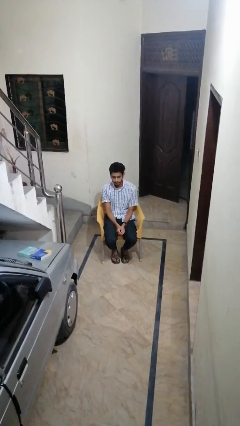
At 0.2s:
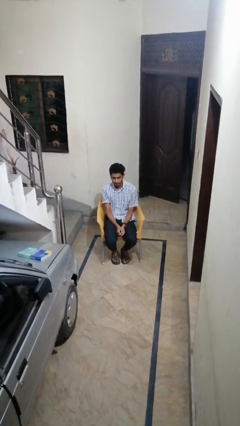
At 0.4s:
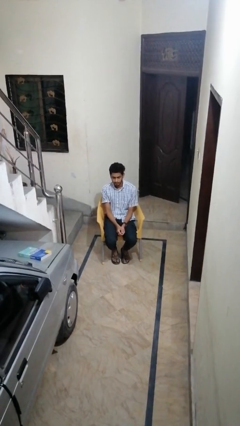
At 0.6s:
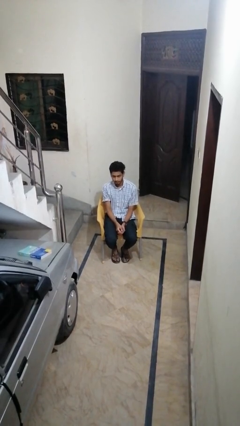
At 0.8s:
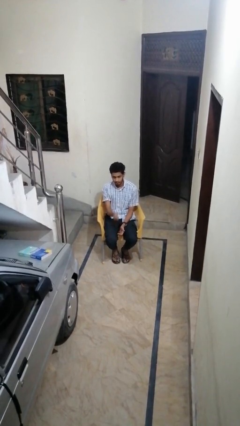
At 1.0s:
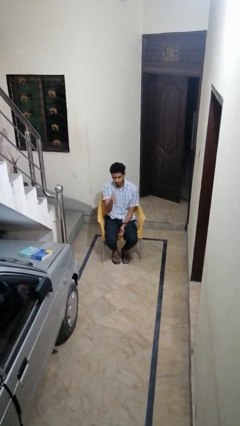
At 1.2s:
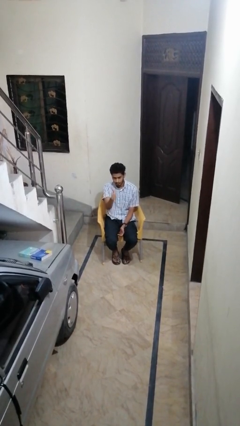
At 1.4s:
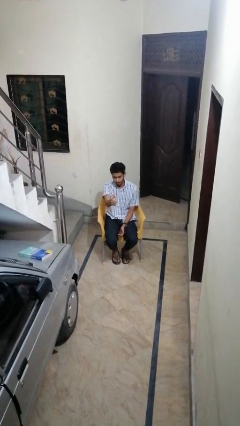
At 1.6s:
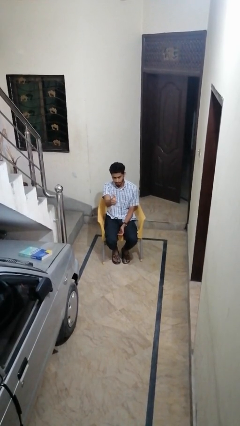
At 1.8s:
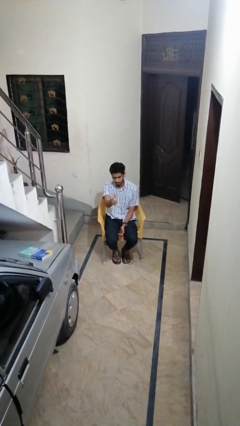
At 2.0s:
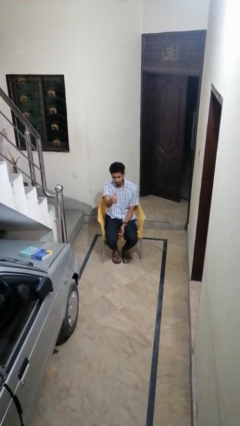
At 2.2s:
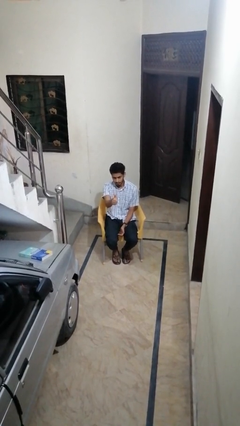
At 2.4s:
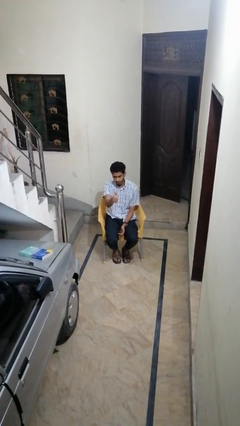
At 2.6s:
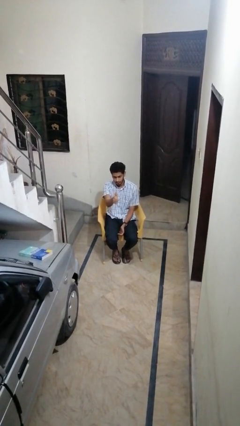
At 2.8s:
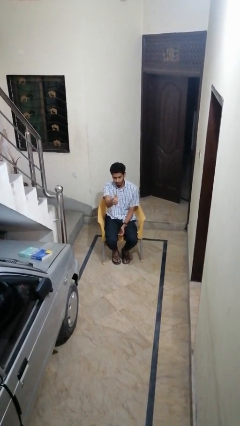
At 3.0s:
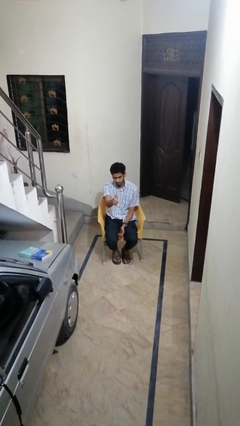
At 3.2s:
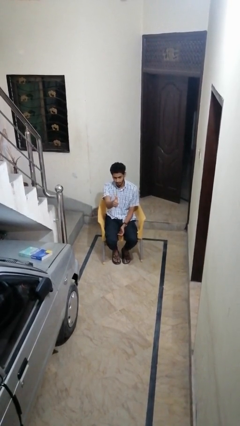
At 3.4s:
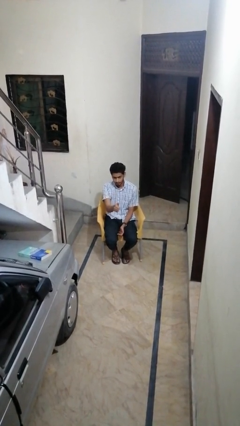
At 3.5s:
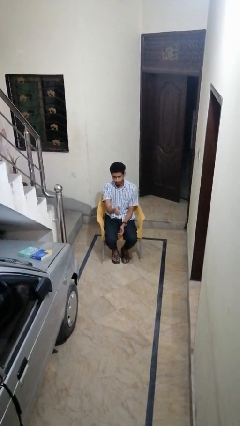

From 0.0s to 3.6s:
person gestures thumbs up

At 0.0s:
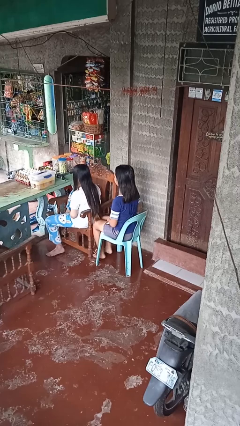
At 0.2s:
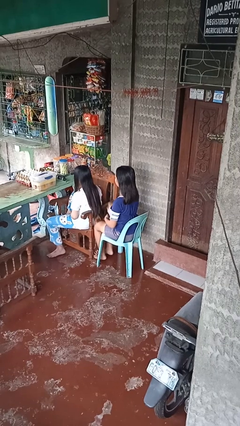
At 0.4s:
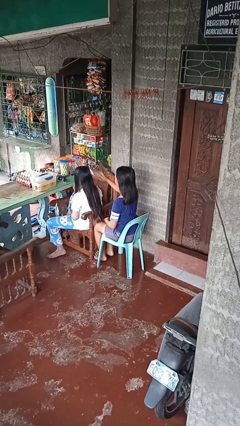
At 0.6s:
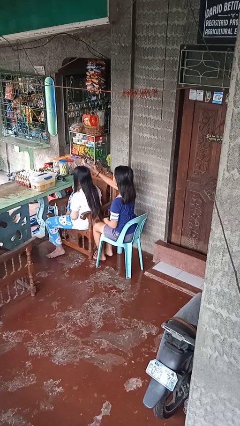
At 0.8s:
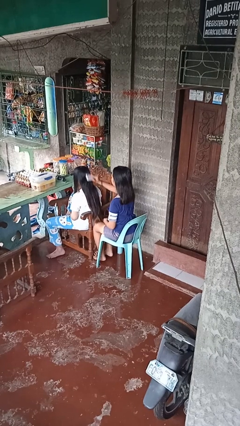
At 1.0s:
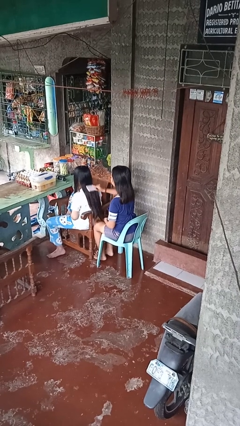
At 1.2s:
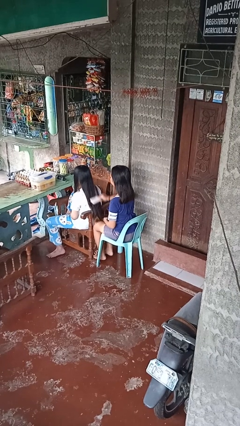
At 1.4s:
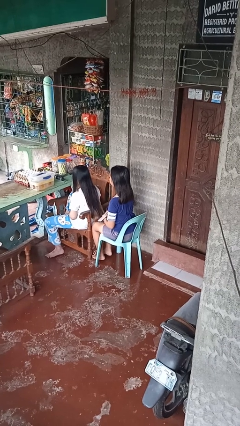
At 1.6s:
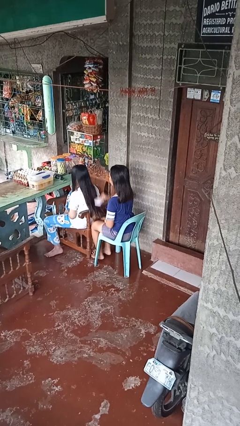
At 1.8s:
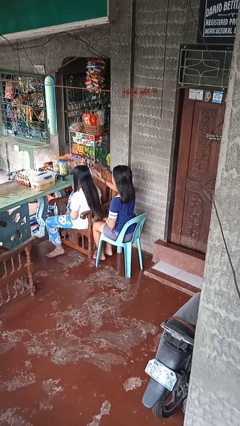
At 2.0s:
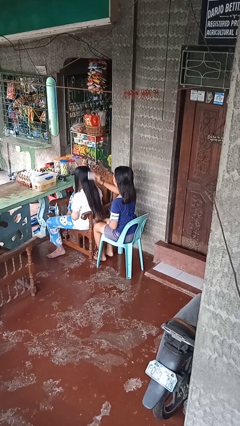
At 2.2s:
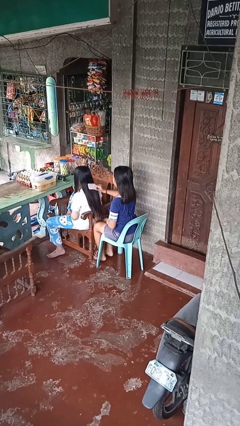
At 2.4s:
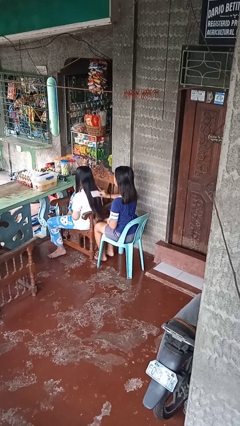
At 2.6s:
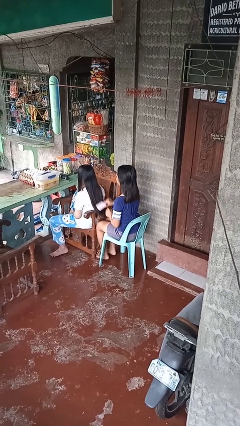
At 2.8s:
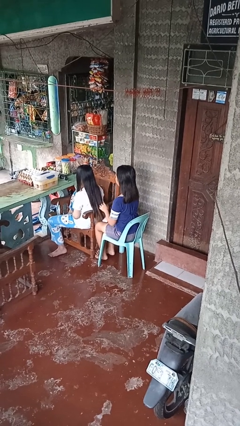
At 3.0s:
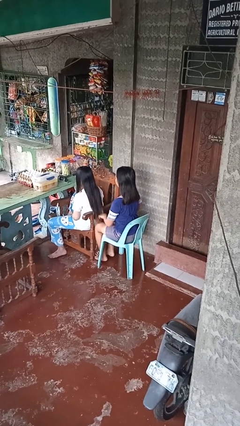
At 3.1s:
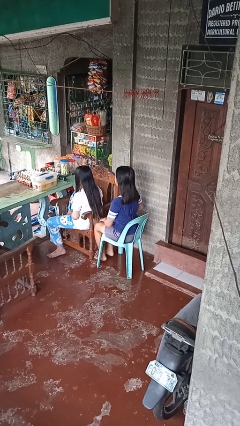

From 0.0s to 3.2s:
person brushes hair of person

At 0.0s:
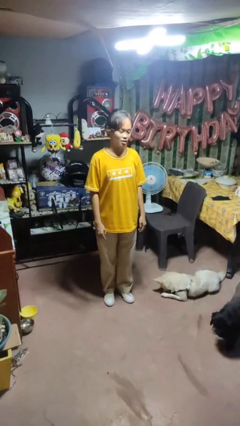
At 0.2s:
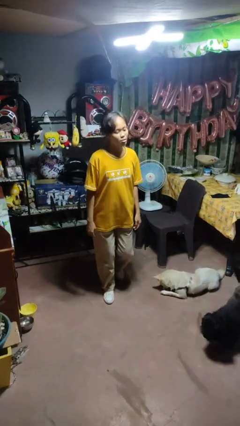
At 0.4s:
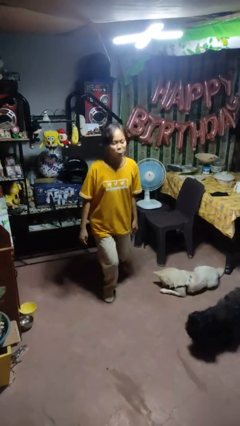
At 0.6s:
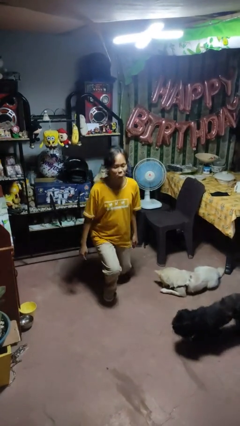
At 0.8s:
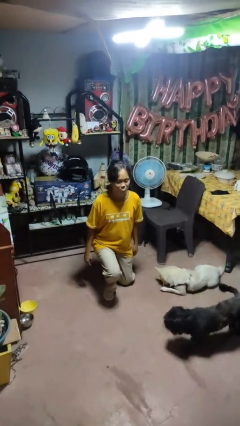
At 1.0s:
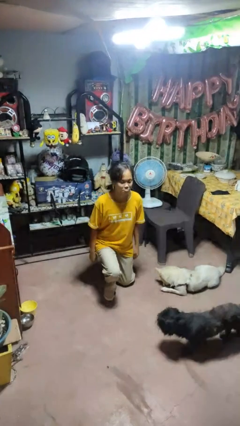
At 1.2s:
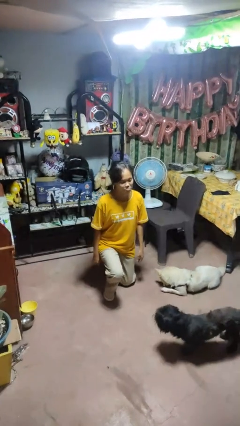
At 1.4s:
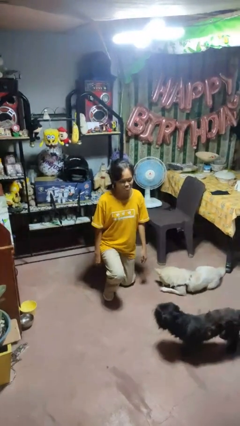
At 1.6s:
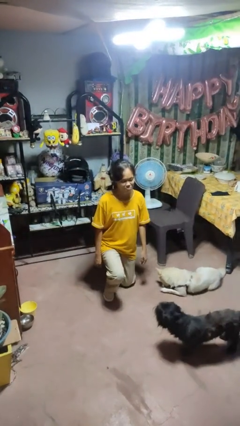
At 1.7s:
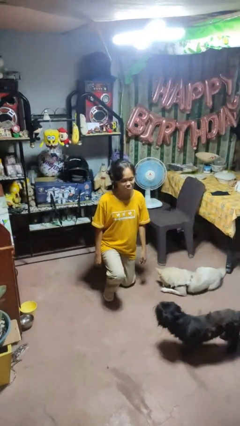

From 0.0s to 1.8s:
person kneels

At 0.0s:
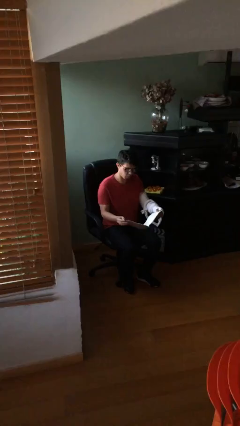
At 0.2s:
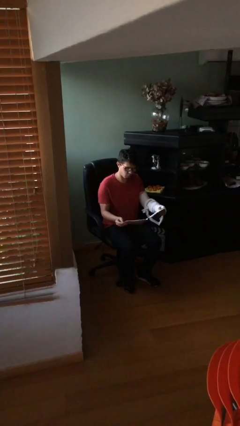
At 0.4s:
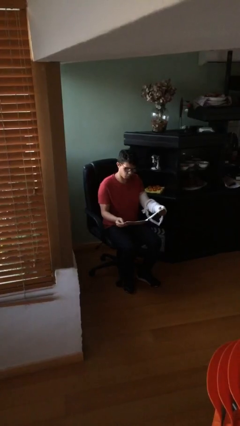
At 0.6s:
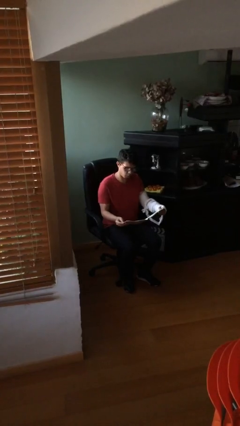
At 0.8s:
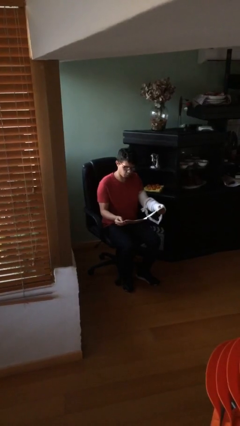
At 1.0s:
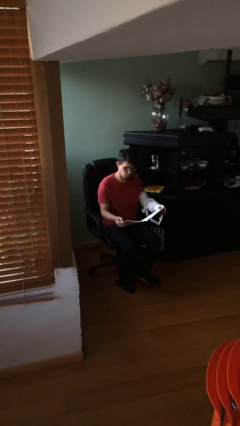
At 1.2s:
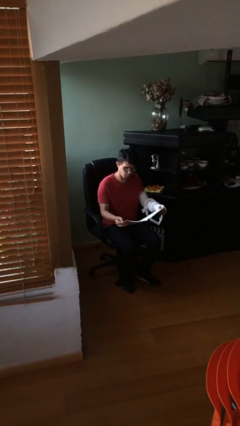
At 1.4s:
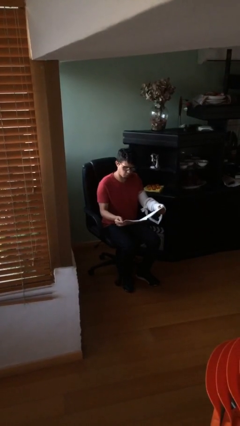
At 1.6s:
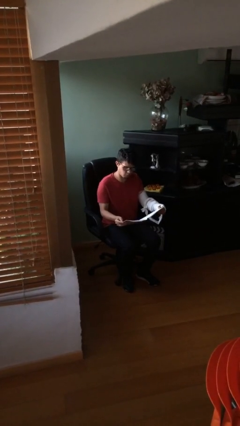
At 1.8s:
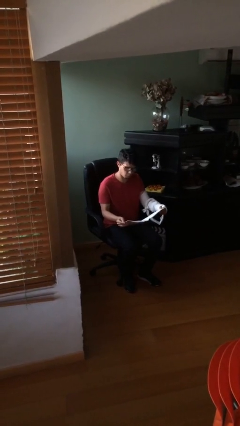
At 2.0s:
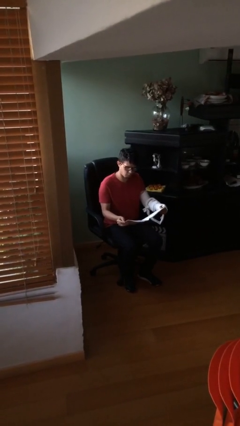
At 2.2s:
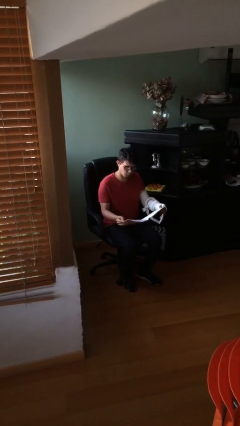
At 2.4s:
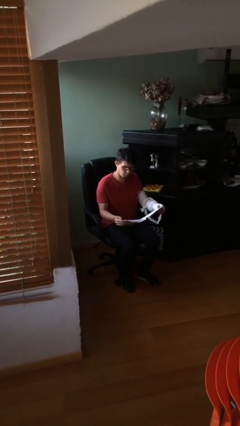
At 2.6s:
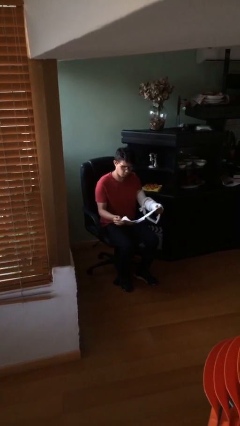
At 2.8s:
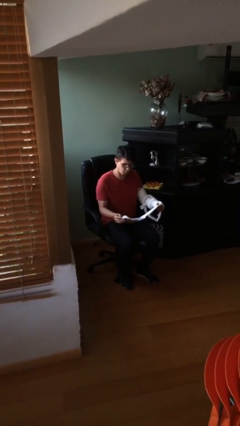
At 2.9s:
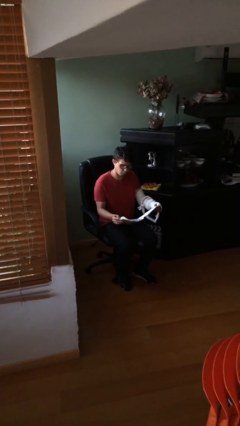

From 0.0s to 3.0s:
person reads document

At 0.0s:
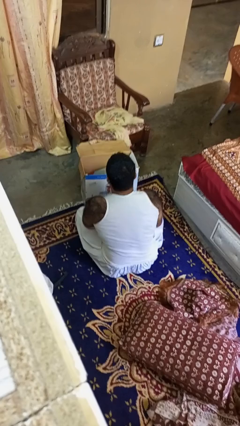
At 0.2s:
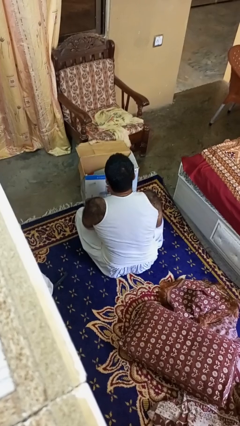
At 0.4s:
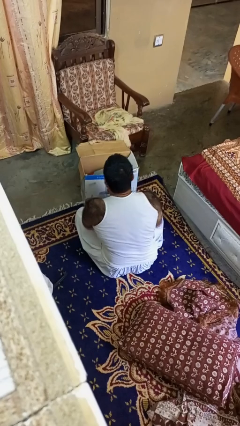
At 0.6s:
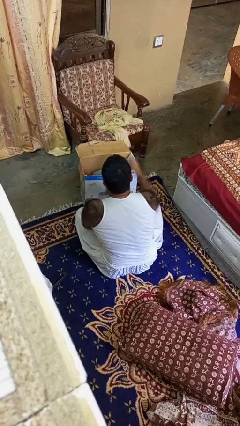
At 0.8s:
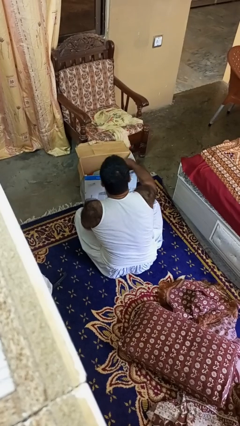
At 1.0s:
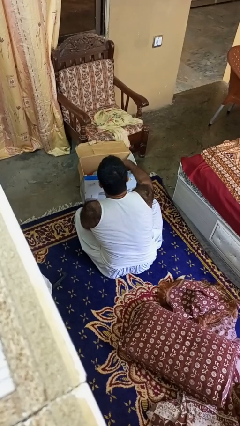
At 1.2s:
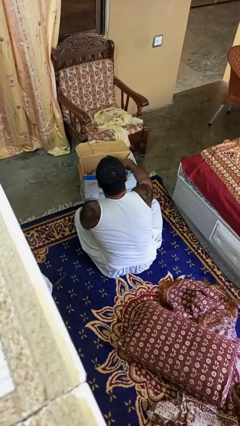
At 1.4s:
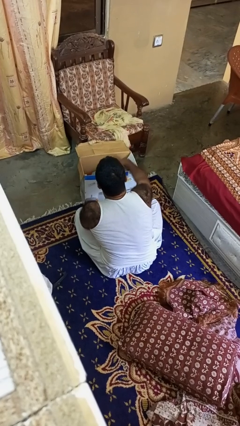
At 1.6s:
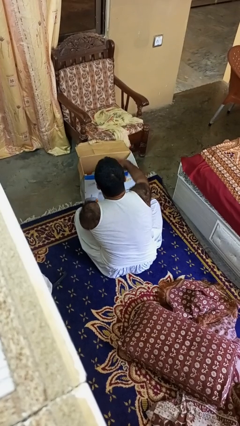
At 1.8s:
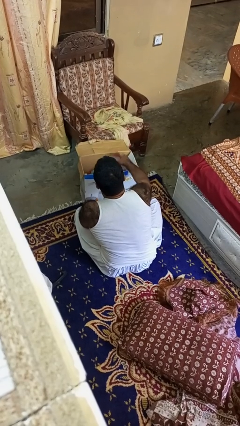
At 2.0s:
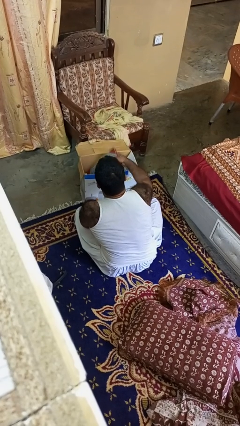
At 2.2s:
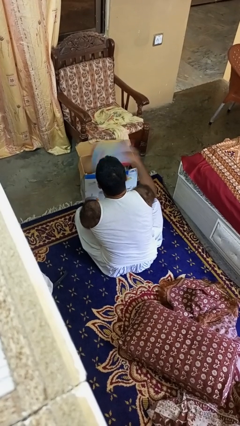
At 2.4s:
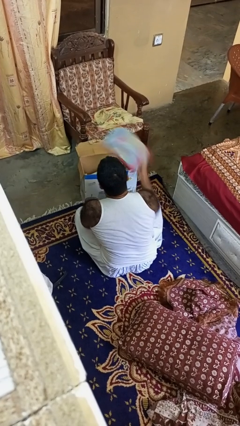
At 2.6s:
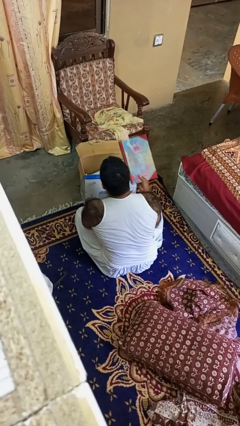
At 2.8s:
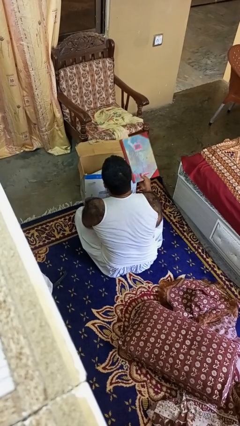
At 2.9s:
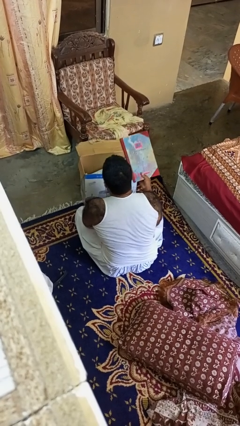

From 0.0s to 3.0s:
person takes object from box

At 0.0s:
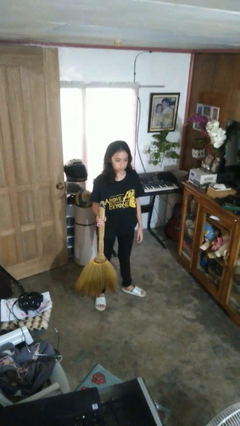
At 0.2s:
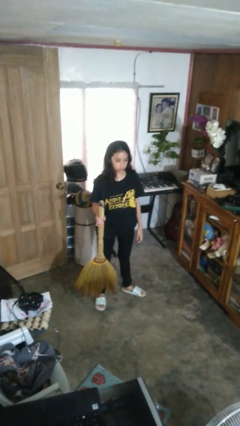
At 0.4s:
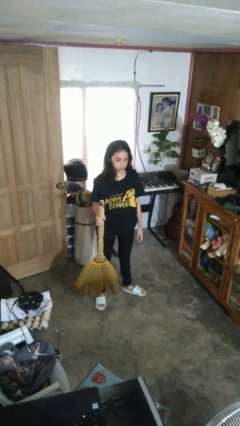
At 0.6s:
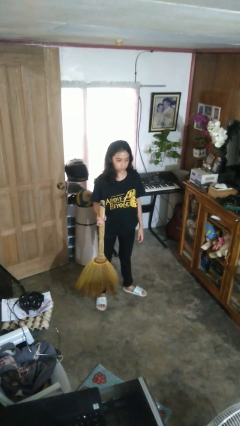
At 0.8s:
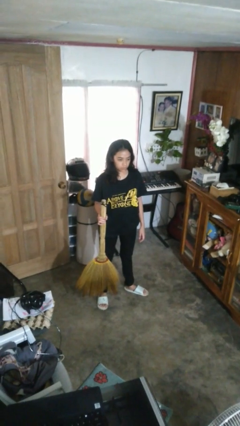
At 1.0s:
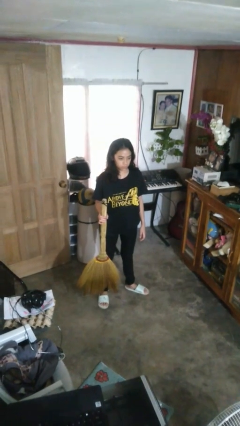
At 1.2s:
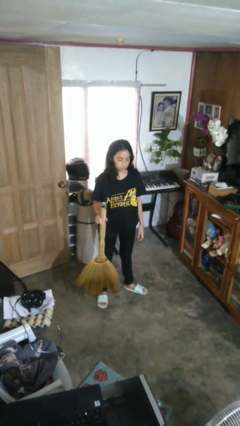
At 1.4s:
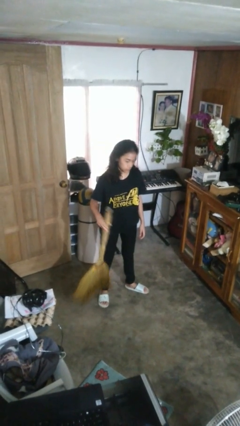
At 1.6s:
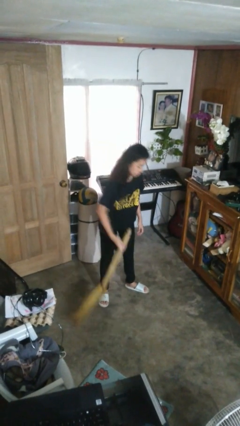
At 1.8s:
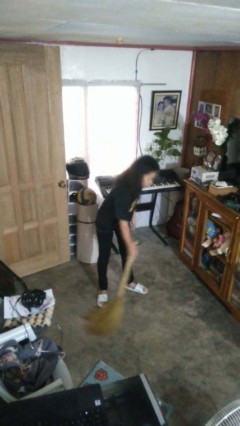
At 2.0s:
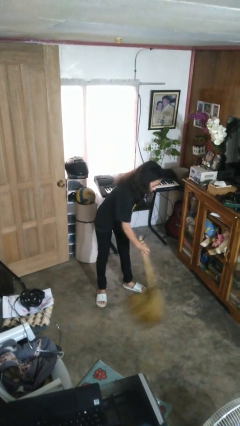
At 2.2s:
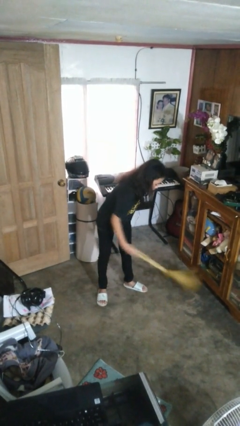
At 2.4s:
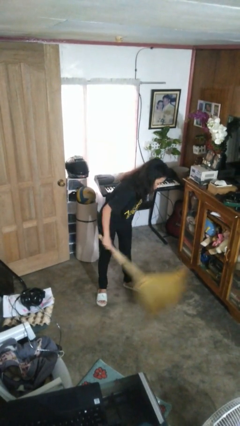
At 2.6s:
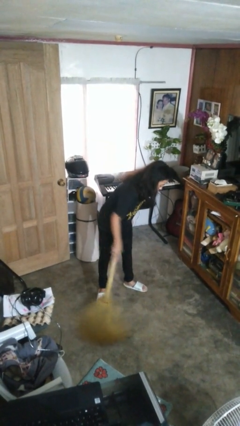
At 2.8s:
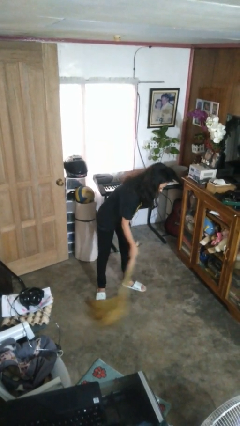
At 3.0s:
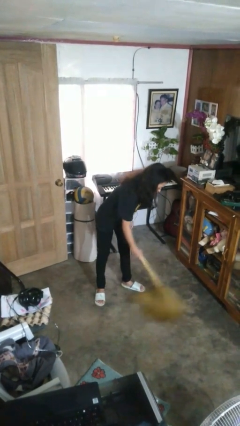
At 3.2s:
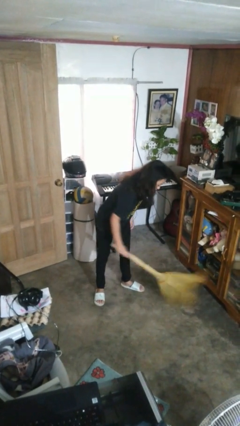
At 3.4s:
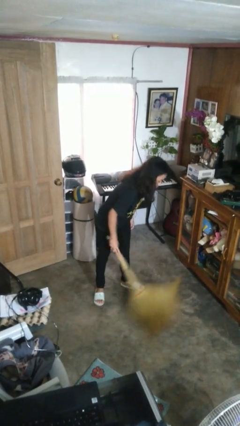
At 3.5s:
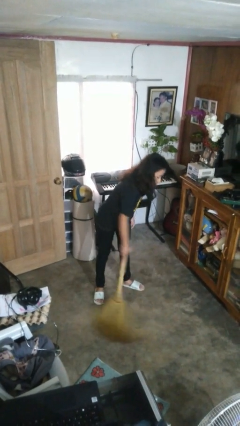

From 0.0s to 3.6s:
person sweeps floor
